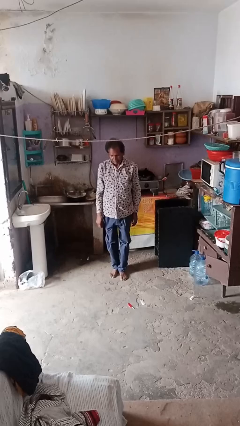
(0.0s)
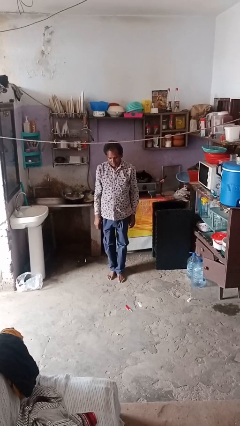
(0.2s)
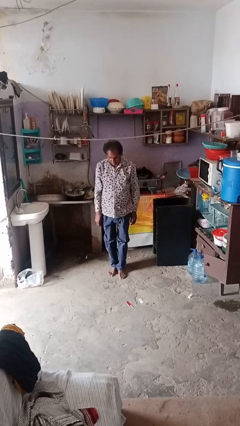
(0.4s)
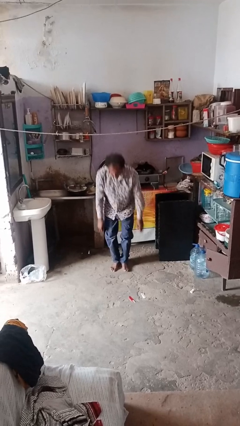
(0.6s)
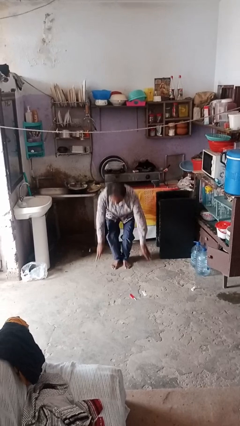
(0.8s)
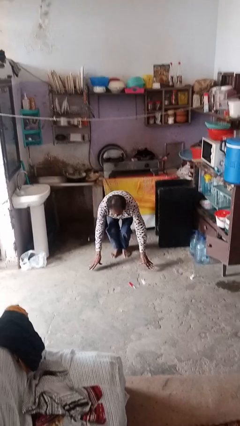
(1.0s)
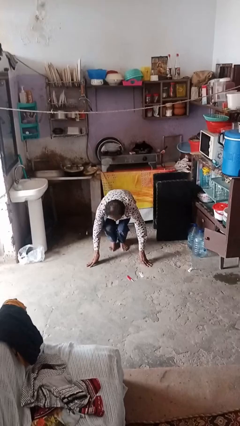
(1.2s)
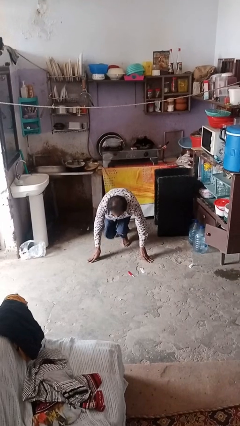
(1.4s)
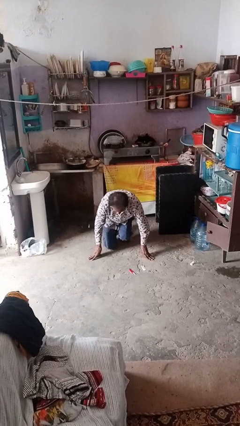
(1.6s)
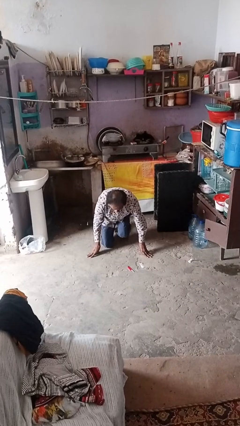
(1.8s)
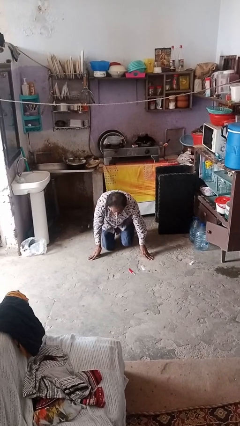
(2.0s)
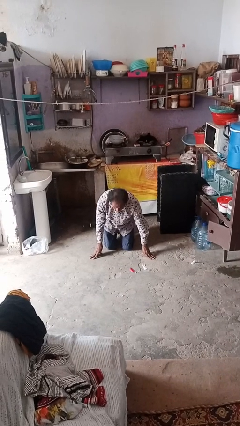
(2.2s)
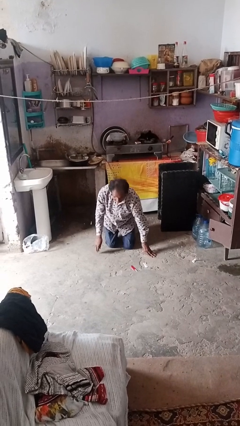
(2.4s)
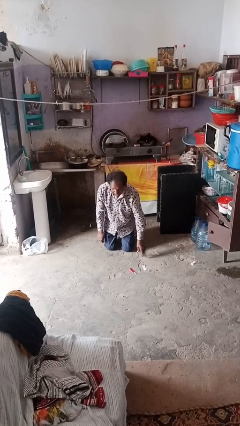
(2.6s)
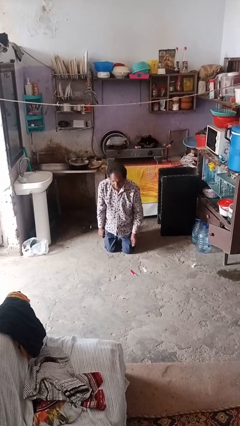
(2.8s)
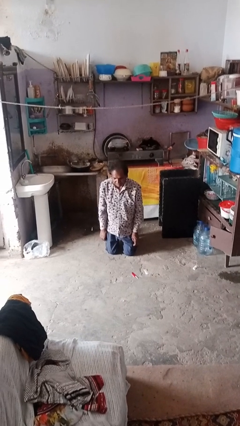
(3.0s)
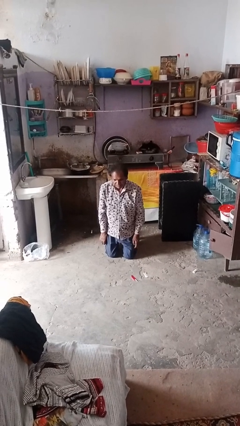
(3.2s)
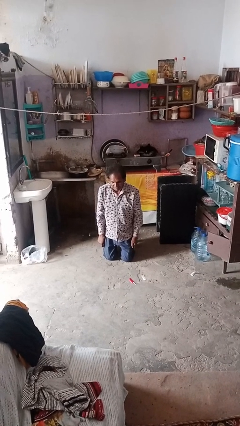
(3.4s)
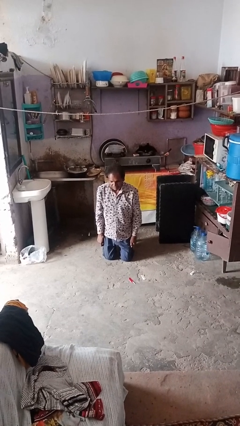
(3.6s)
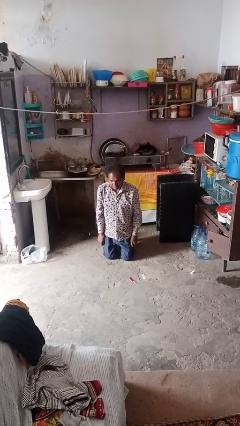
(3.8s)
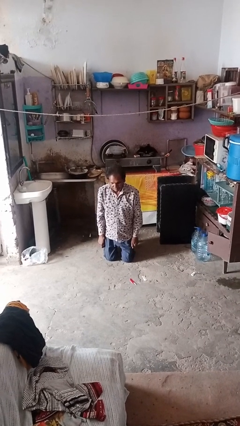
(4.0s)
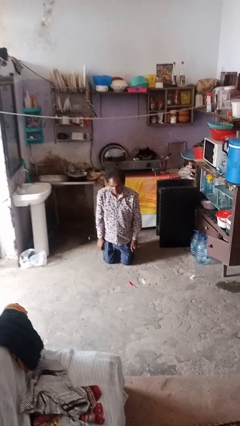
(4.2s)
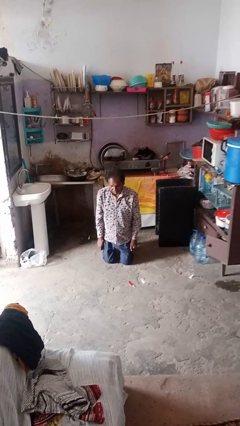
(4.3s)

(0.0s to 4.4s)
person kneels

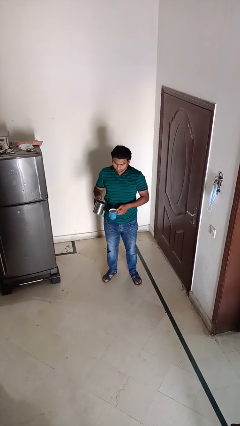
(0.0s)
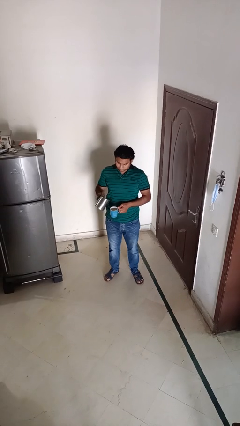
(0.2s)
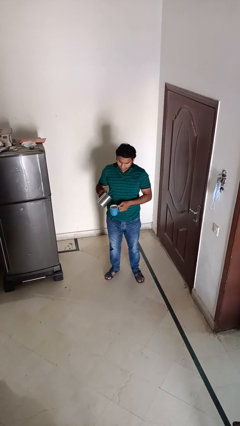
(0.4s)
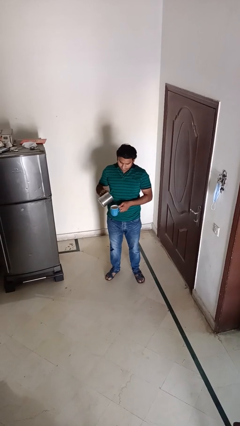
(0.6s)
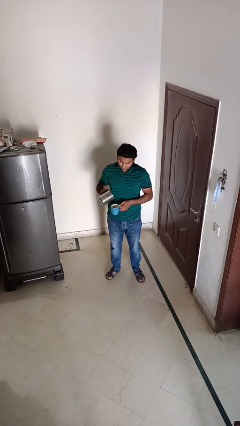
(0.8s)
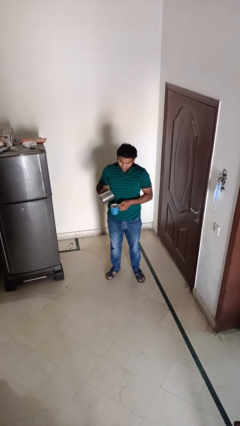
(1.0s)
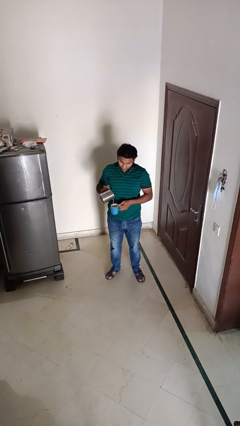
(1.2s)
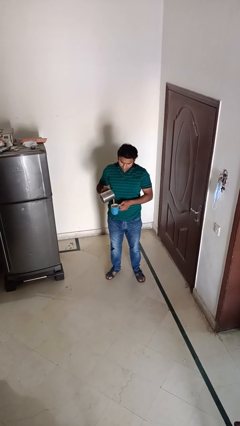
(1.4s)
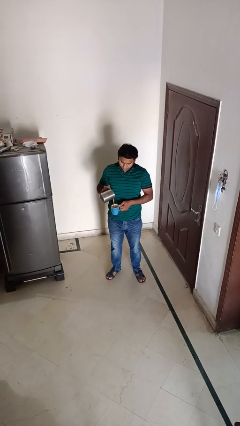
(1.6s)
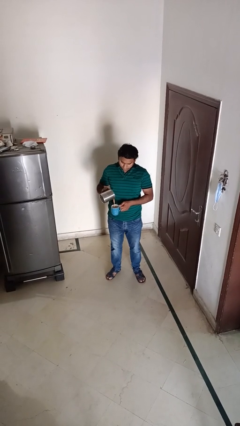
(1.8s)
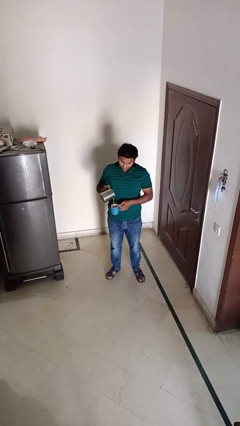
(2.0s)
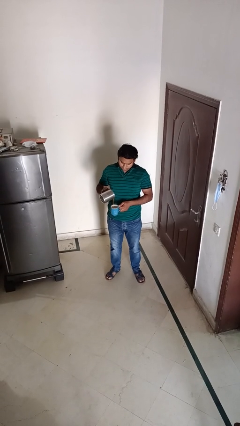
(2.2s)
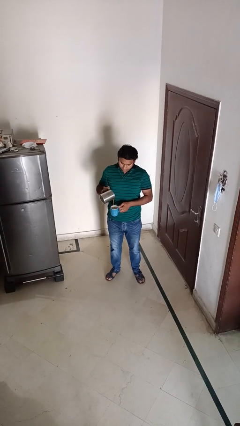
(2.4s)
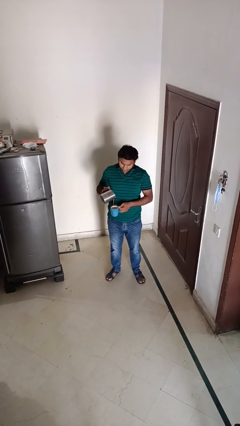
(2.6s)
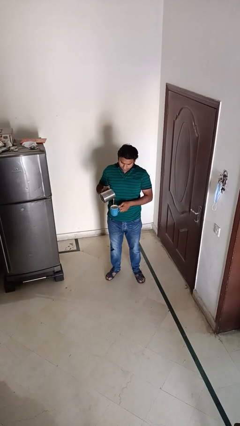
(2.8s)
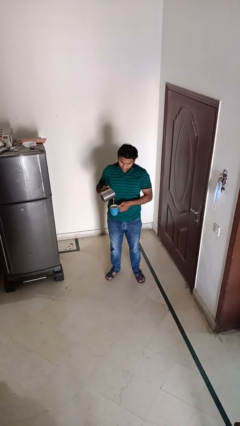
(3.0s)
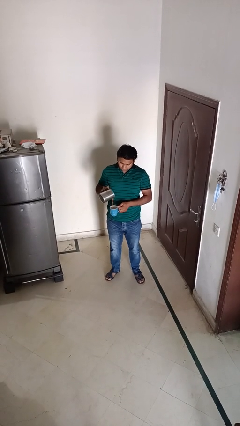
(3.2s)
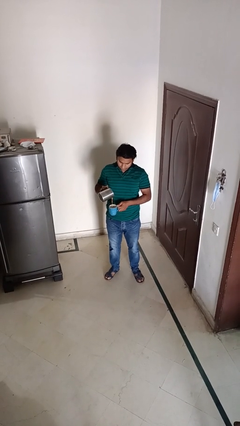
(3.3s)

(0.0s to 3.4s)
person pours coffee into mug

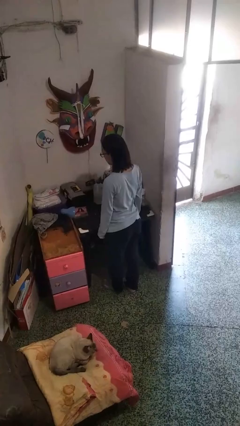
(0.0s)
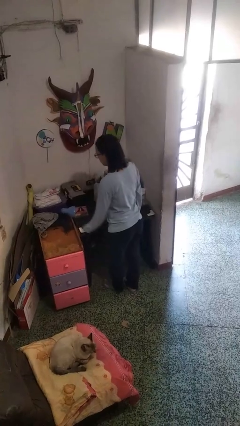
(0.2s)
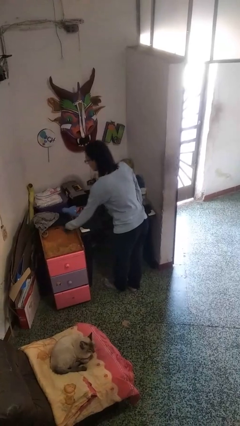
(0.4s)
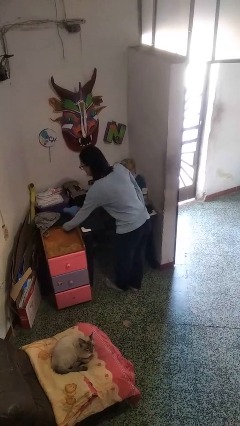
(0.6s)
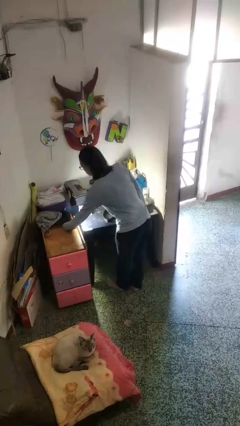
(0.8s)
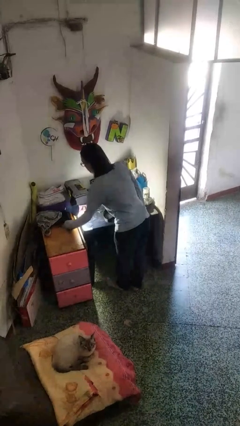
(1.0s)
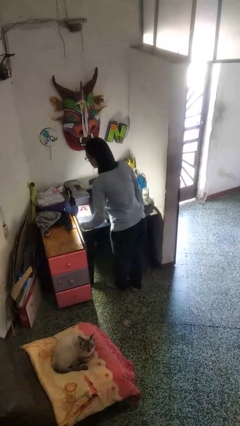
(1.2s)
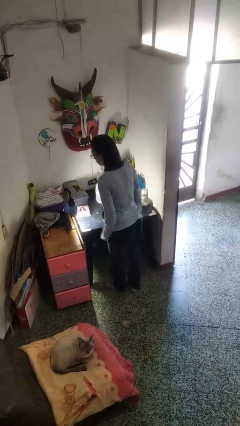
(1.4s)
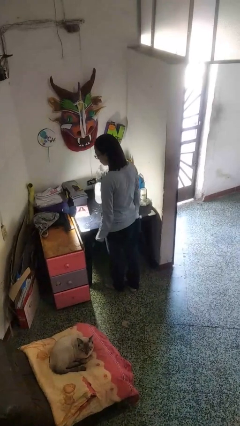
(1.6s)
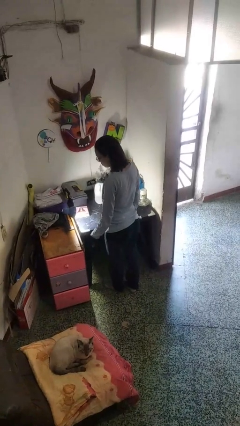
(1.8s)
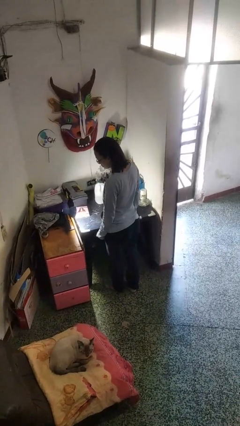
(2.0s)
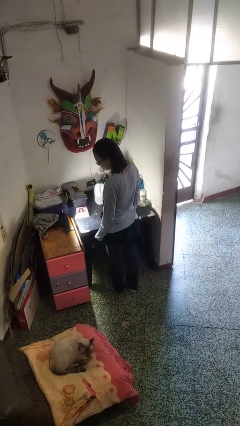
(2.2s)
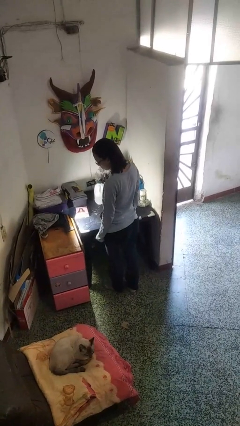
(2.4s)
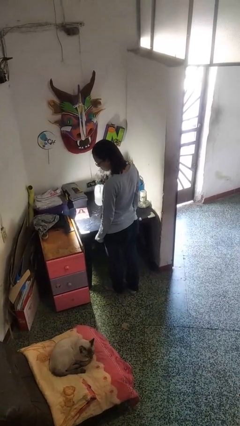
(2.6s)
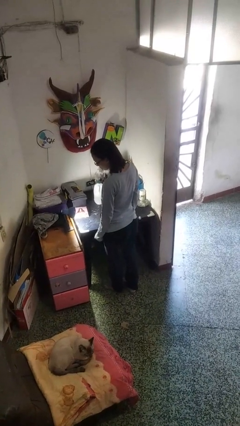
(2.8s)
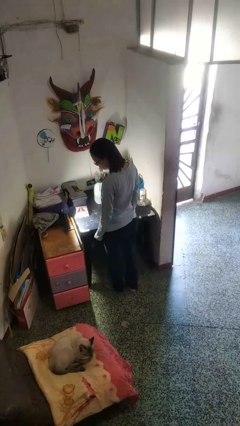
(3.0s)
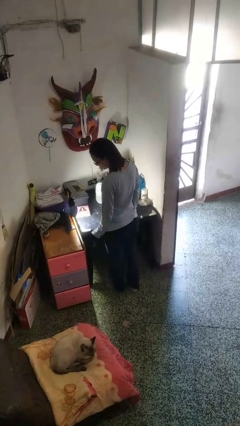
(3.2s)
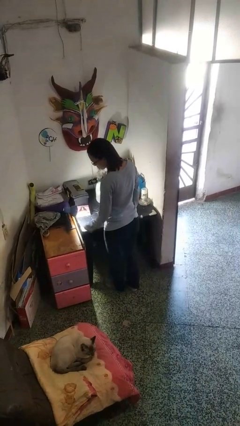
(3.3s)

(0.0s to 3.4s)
person turns on lamp

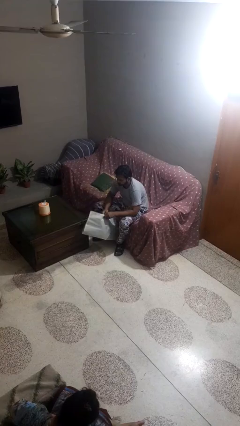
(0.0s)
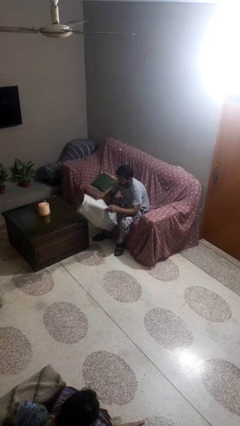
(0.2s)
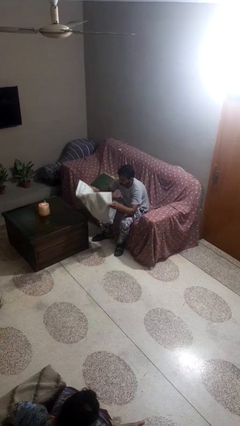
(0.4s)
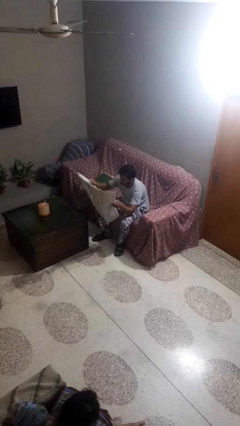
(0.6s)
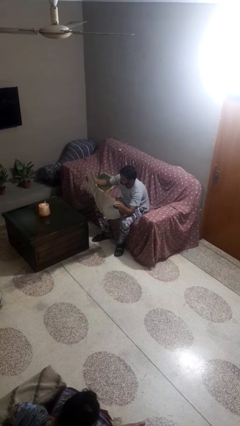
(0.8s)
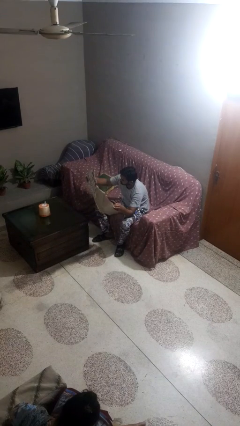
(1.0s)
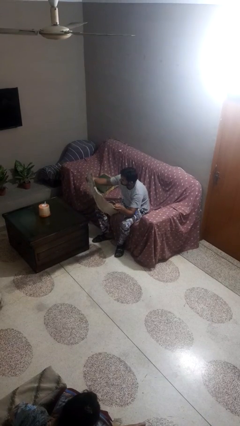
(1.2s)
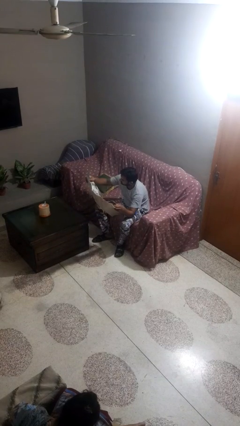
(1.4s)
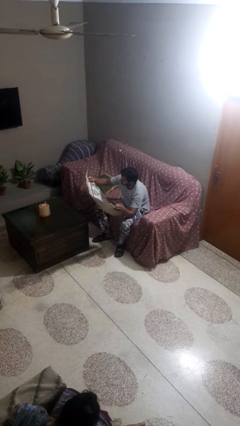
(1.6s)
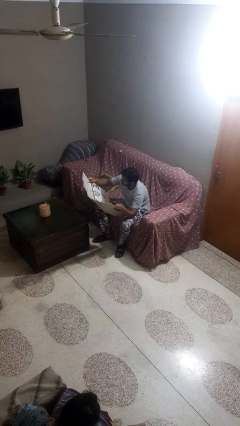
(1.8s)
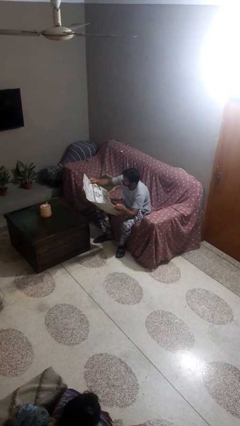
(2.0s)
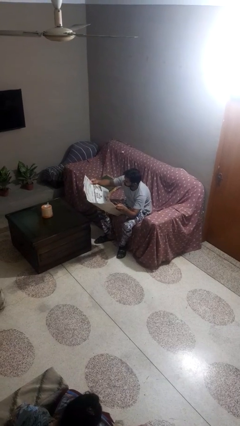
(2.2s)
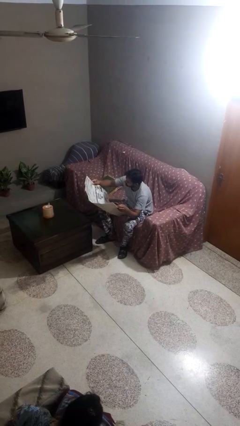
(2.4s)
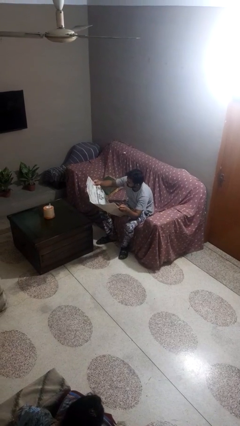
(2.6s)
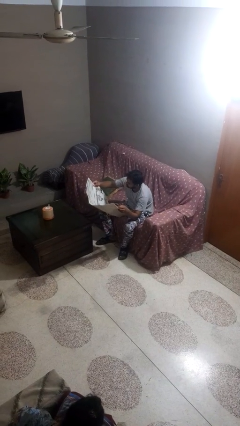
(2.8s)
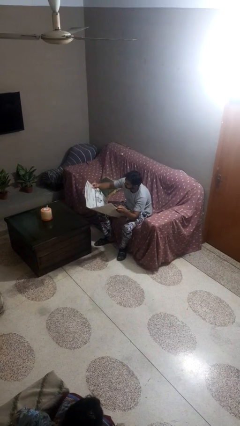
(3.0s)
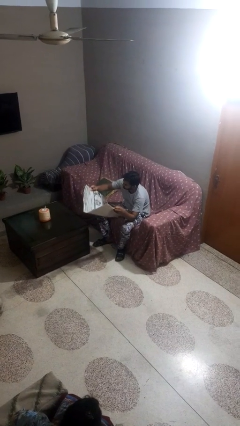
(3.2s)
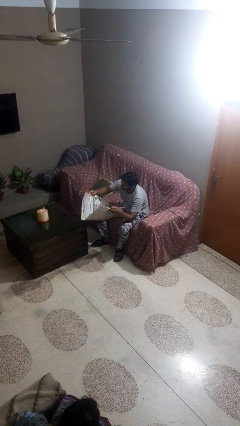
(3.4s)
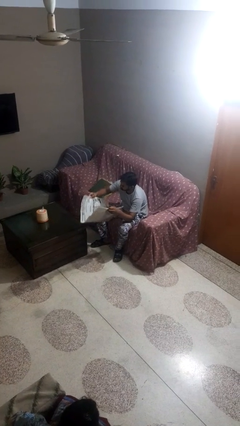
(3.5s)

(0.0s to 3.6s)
person reads newspaper

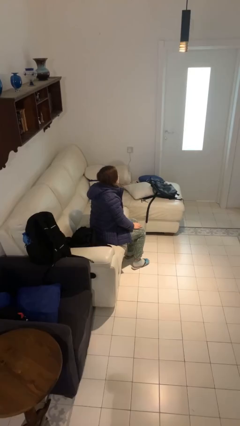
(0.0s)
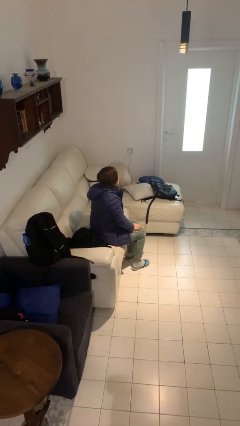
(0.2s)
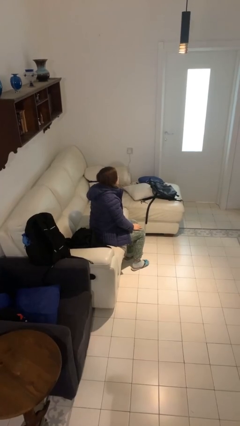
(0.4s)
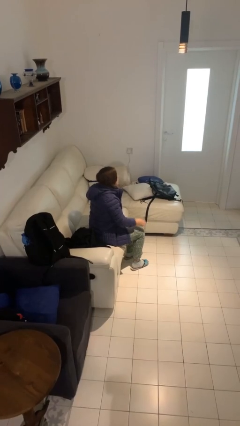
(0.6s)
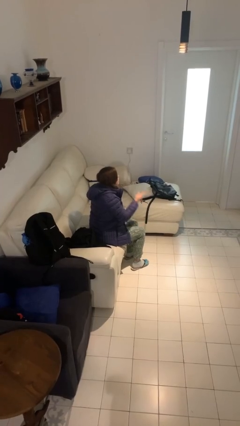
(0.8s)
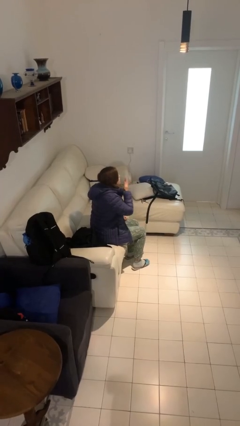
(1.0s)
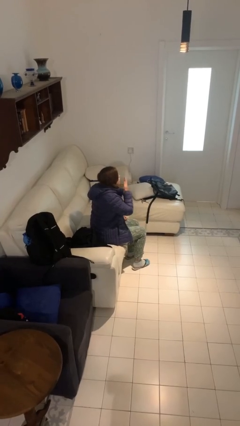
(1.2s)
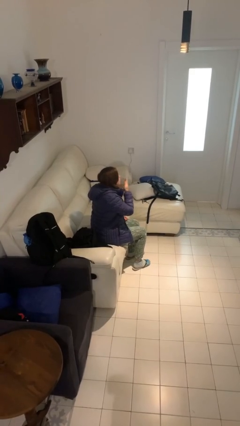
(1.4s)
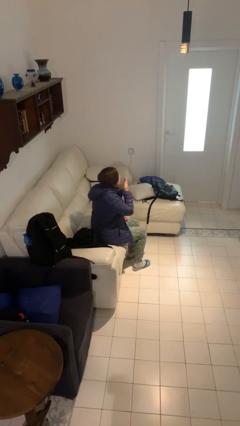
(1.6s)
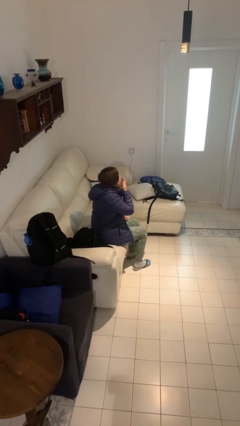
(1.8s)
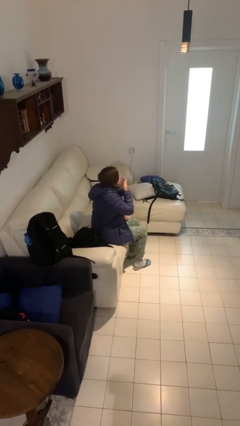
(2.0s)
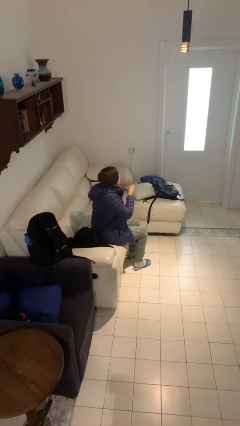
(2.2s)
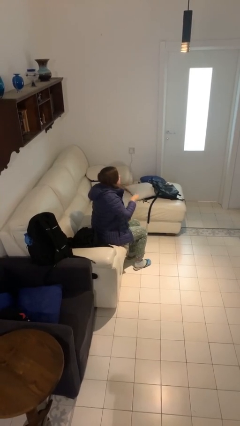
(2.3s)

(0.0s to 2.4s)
person yawns

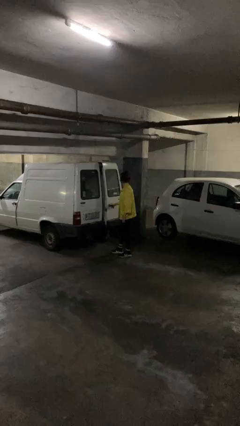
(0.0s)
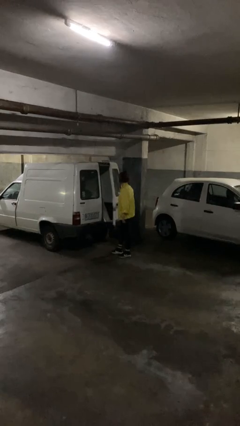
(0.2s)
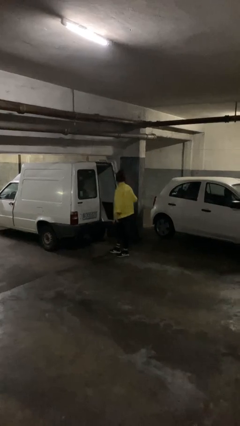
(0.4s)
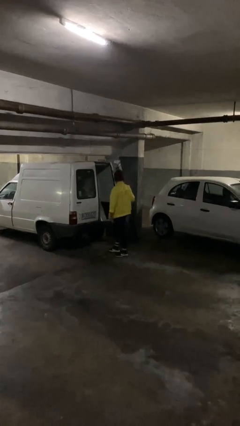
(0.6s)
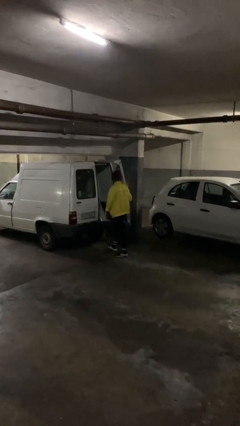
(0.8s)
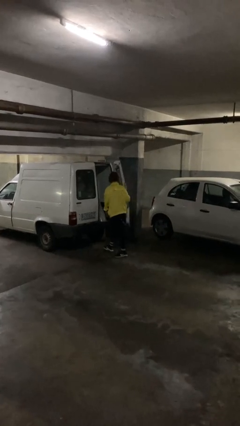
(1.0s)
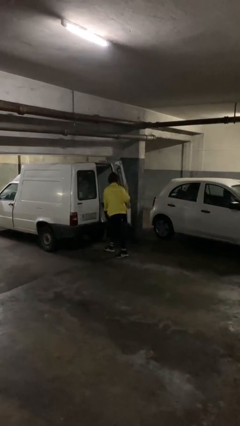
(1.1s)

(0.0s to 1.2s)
person opens car door
